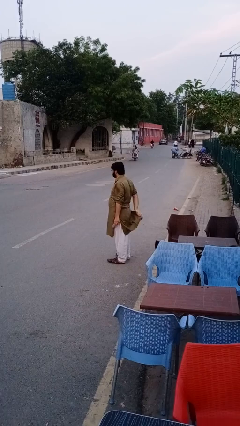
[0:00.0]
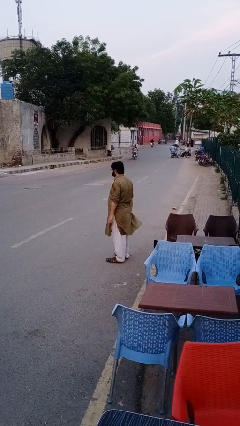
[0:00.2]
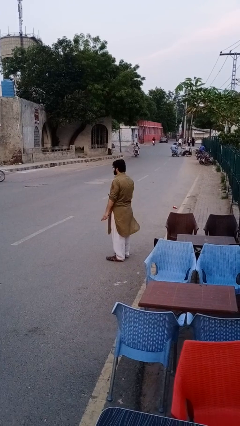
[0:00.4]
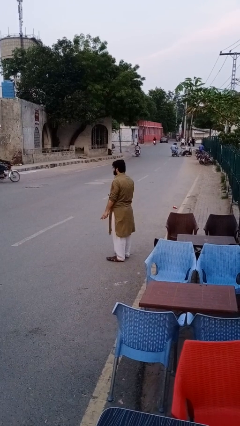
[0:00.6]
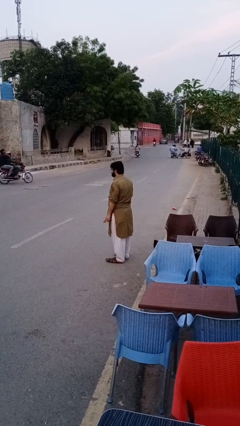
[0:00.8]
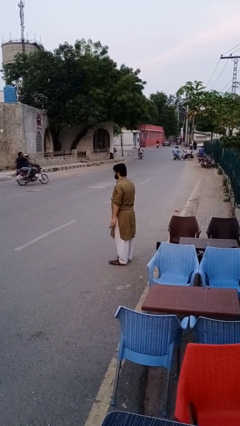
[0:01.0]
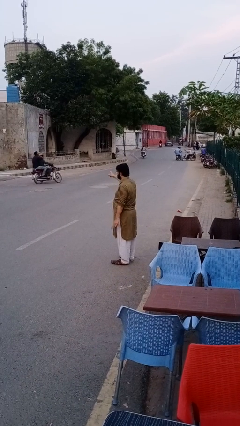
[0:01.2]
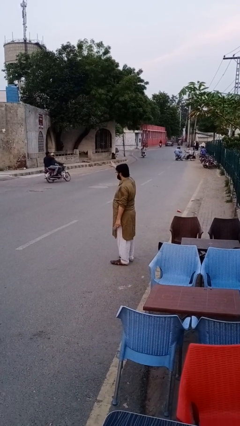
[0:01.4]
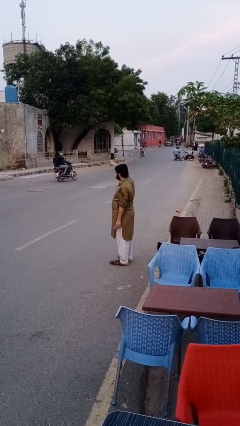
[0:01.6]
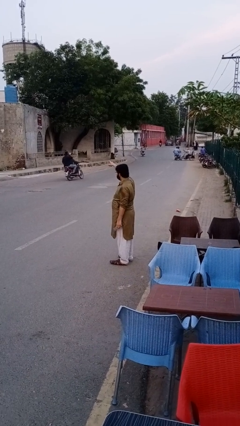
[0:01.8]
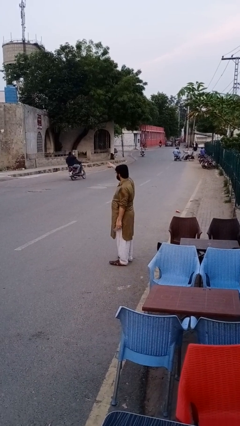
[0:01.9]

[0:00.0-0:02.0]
person takes phone from pocket

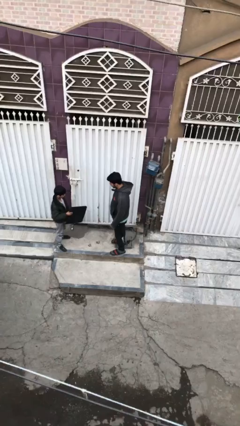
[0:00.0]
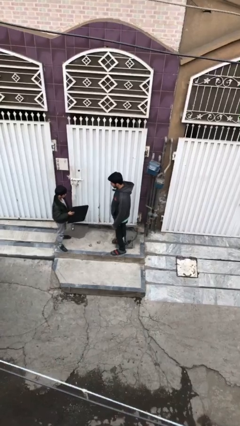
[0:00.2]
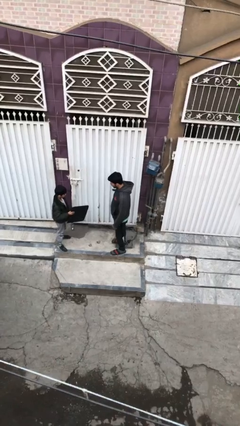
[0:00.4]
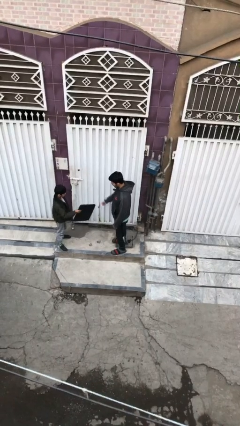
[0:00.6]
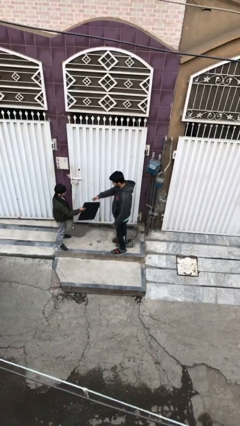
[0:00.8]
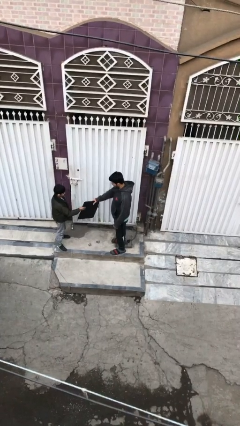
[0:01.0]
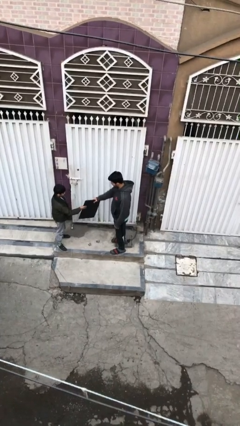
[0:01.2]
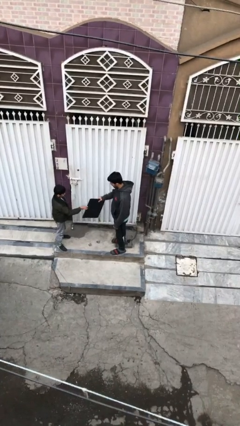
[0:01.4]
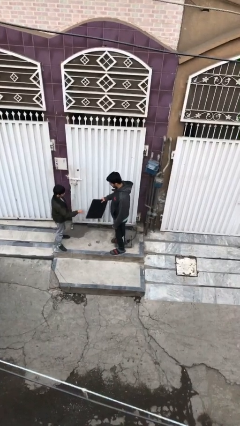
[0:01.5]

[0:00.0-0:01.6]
person transfers object to person

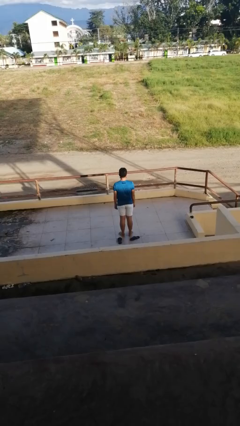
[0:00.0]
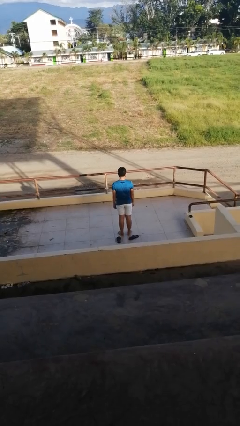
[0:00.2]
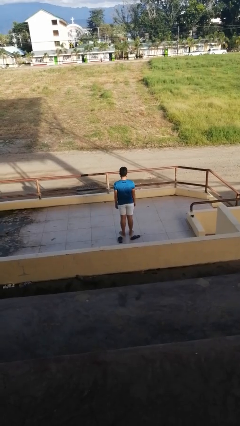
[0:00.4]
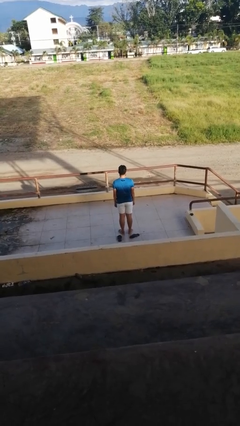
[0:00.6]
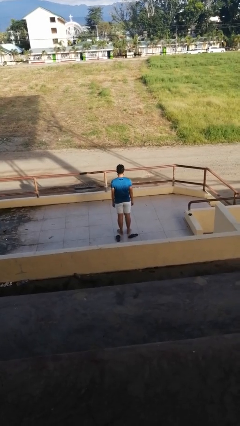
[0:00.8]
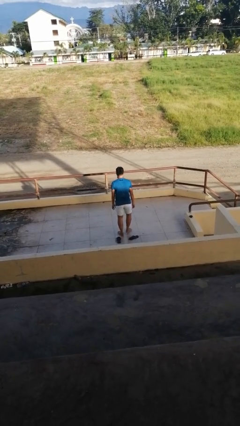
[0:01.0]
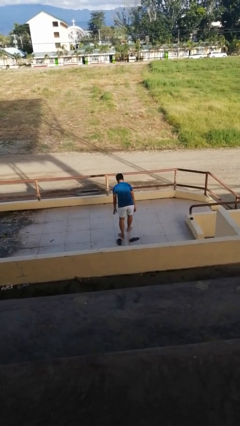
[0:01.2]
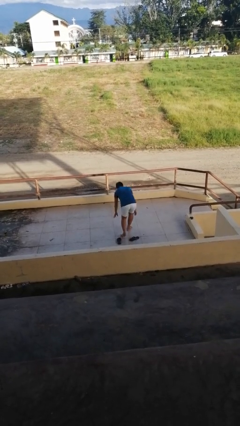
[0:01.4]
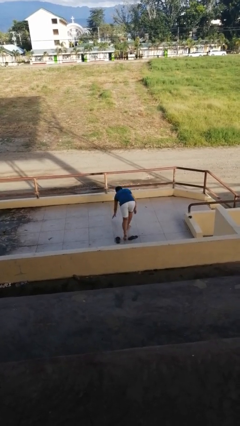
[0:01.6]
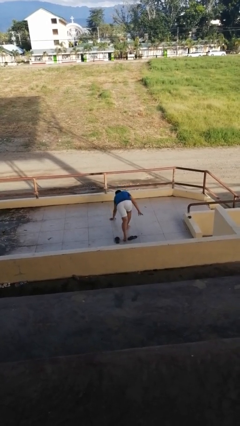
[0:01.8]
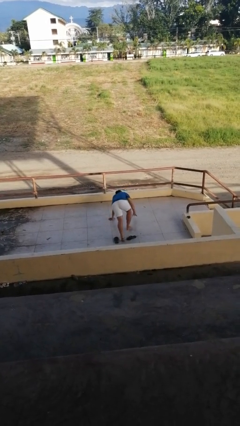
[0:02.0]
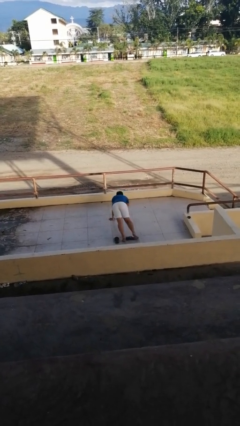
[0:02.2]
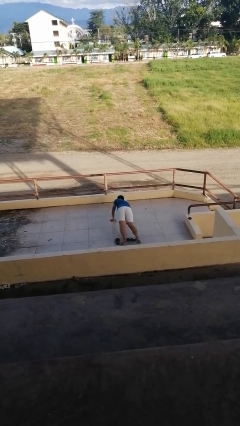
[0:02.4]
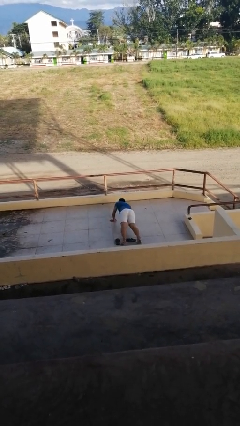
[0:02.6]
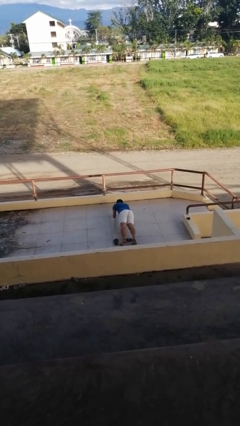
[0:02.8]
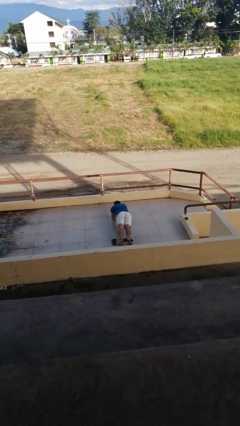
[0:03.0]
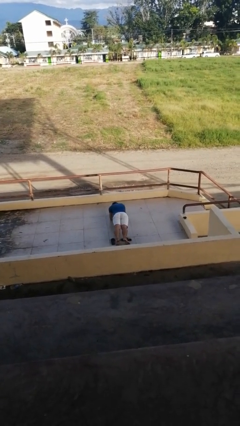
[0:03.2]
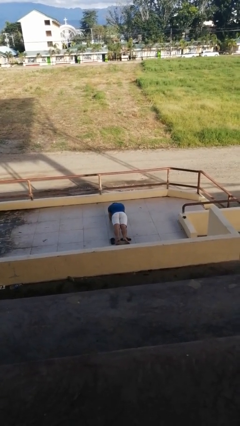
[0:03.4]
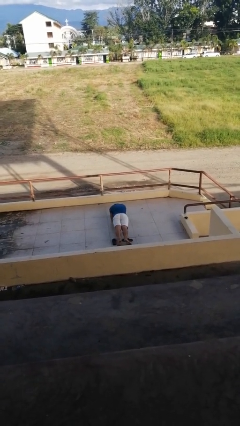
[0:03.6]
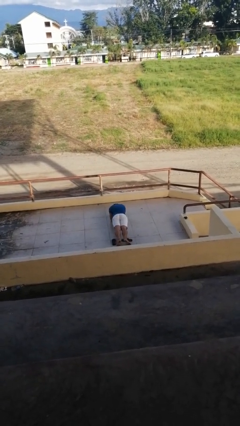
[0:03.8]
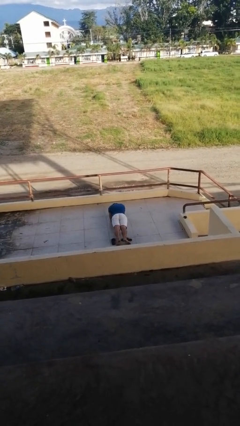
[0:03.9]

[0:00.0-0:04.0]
person exercises with plank

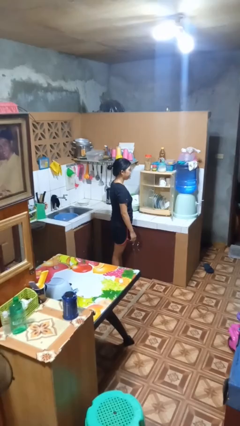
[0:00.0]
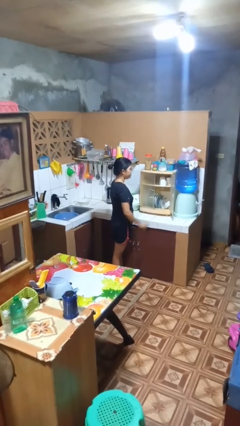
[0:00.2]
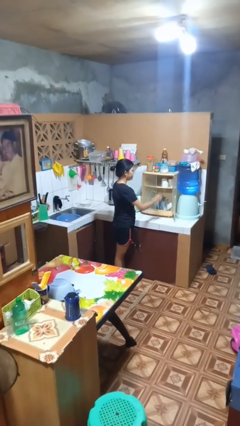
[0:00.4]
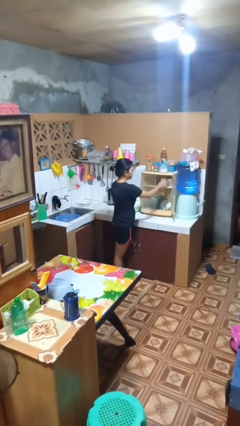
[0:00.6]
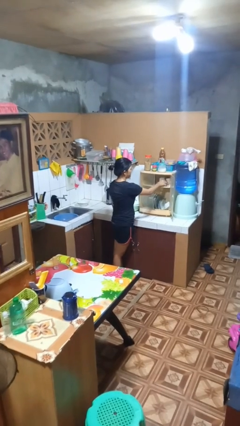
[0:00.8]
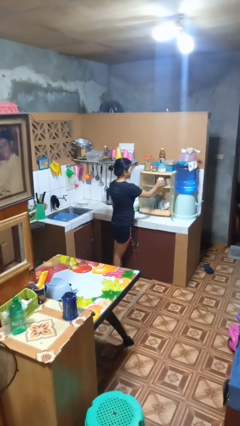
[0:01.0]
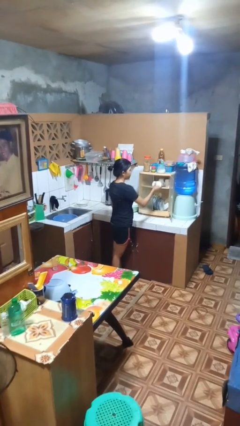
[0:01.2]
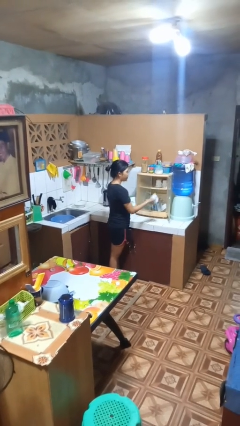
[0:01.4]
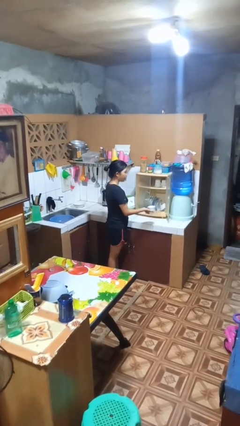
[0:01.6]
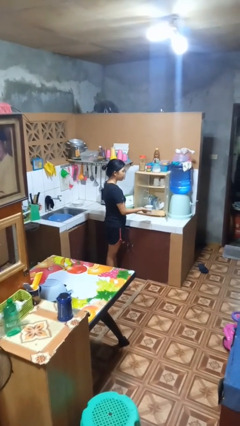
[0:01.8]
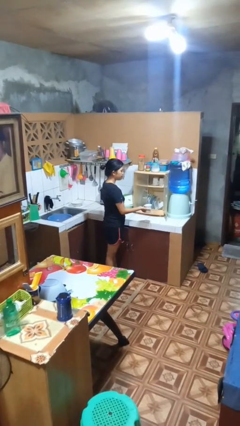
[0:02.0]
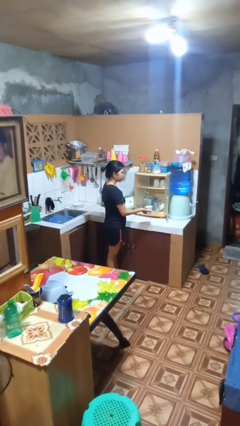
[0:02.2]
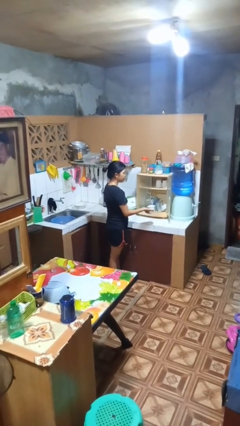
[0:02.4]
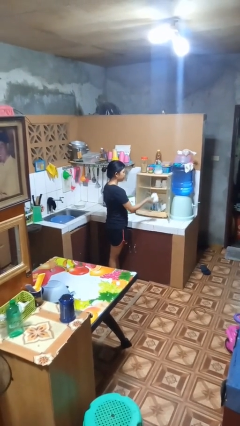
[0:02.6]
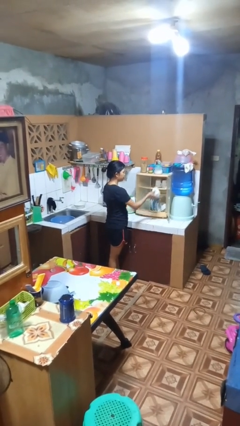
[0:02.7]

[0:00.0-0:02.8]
person takes object from kitchen drawer

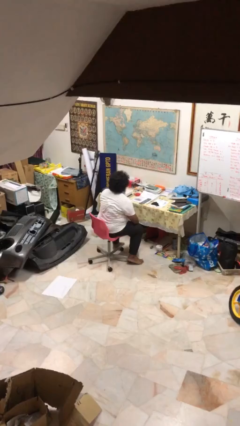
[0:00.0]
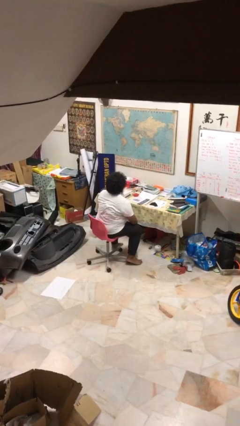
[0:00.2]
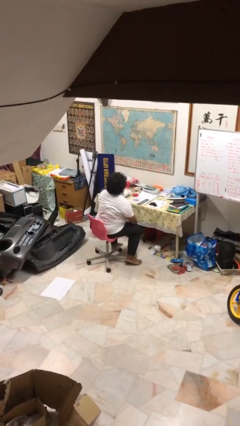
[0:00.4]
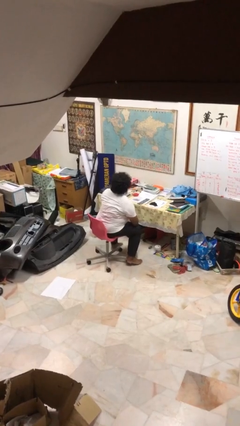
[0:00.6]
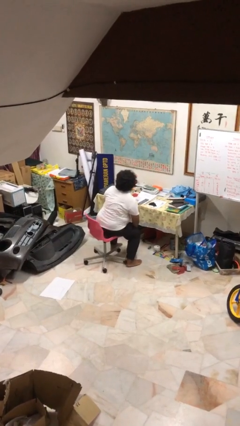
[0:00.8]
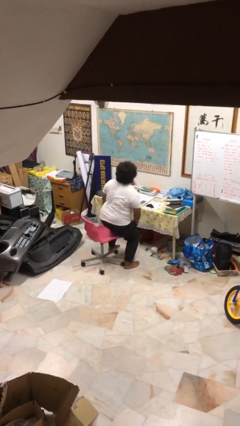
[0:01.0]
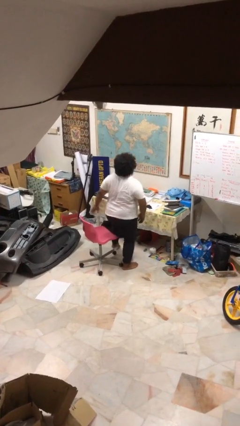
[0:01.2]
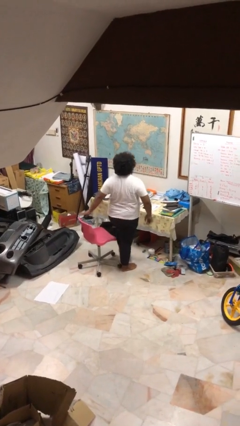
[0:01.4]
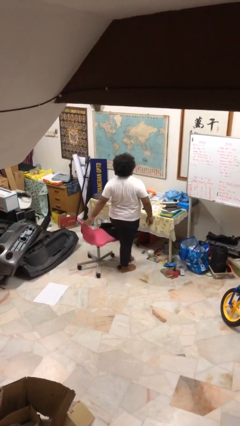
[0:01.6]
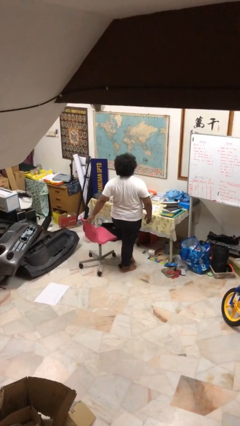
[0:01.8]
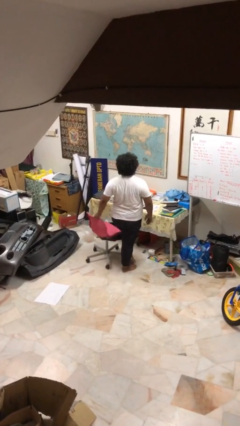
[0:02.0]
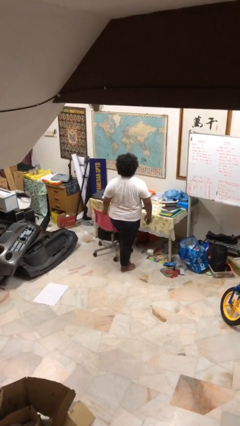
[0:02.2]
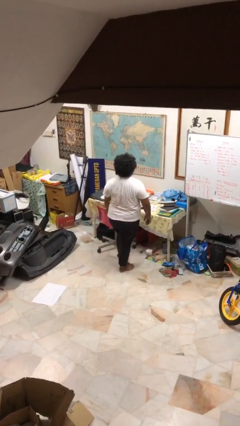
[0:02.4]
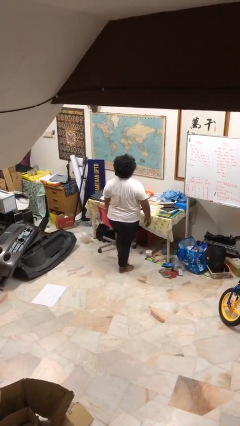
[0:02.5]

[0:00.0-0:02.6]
person stands up

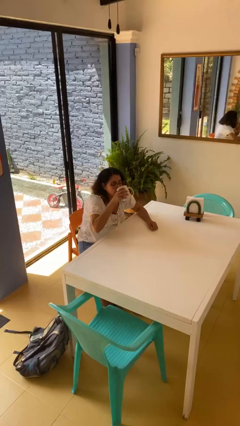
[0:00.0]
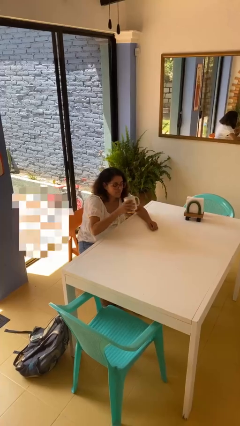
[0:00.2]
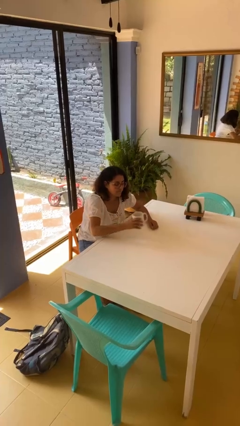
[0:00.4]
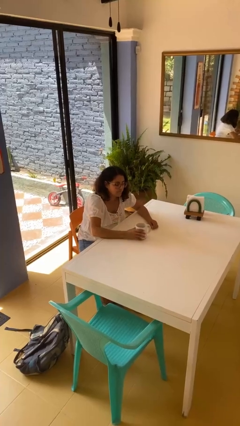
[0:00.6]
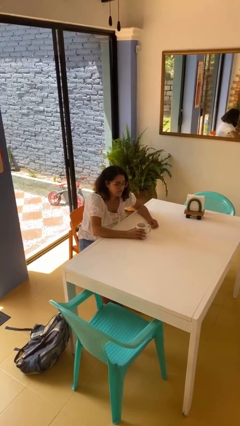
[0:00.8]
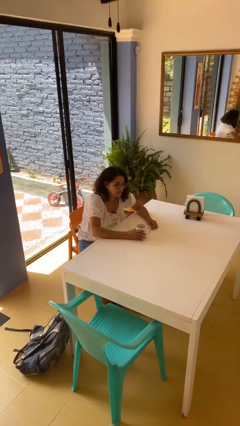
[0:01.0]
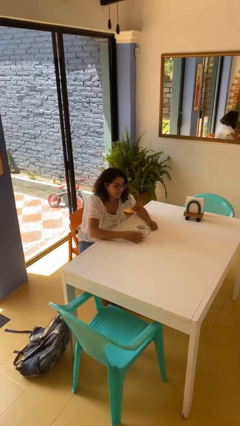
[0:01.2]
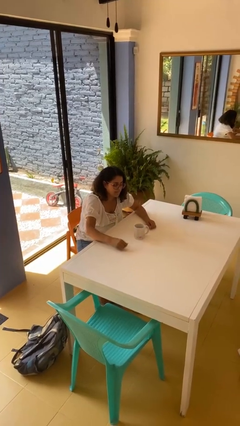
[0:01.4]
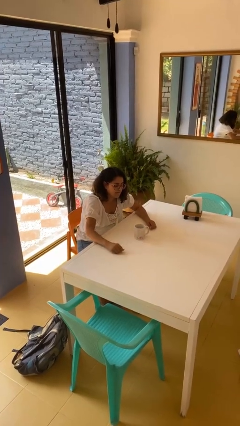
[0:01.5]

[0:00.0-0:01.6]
person puts down object on table

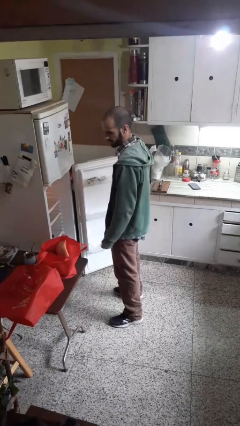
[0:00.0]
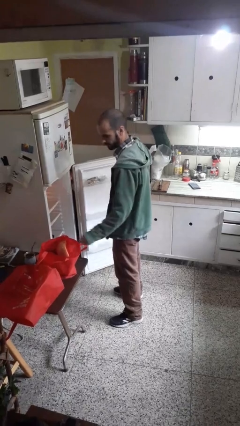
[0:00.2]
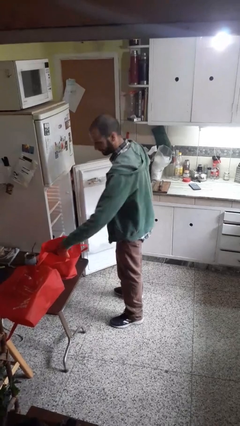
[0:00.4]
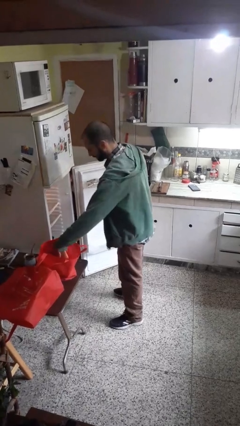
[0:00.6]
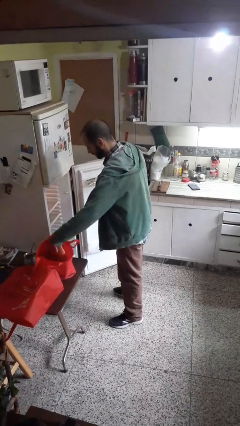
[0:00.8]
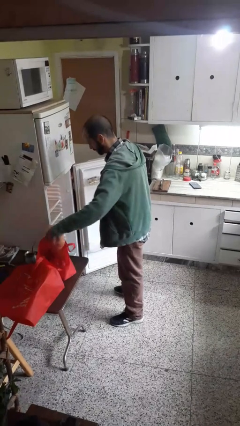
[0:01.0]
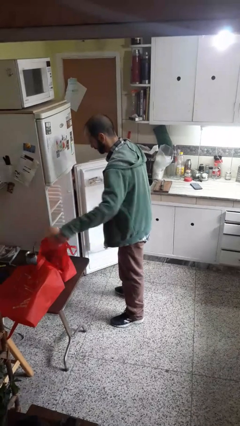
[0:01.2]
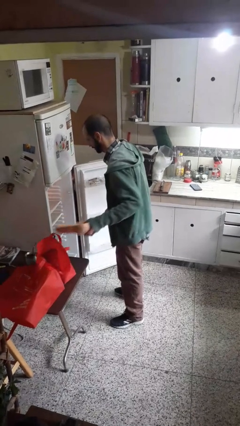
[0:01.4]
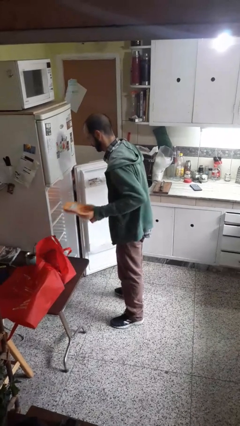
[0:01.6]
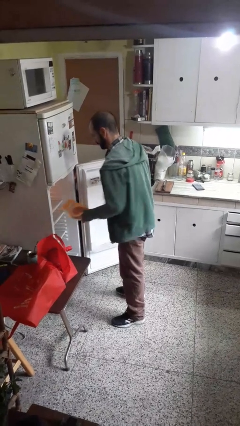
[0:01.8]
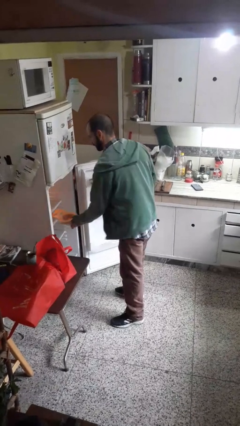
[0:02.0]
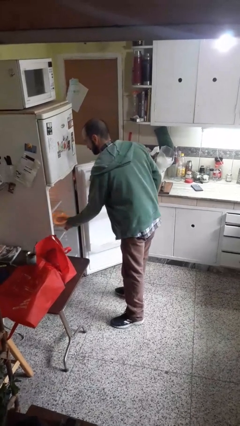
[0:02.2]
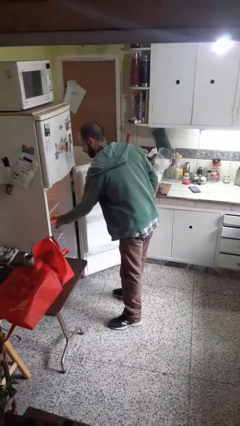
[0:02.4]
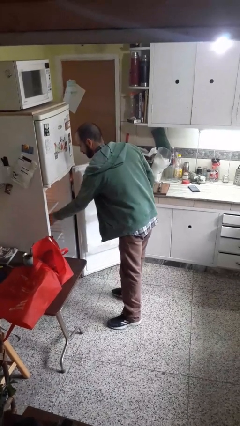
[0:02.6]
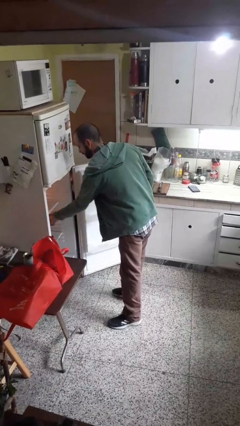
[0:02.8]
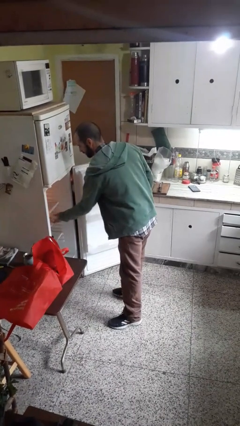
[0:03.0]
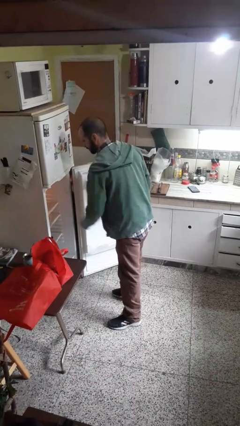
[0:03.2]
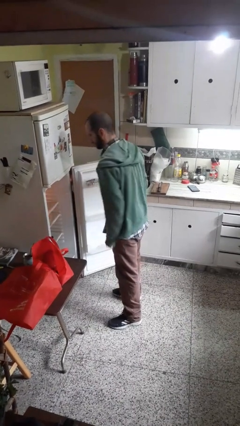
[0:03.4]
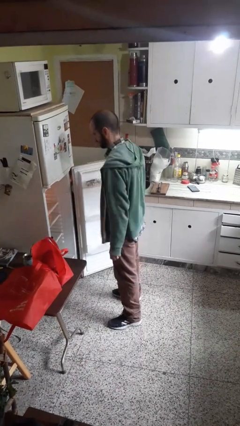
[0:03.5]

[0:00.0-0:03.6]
person loads groceries into refrigerator
